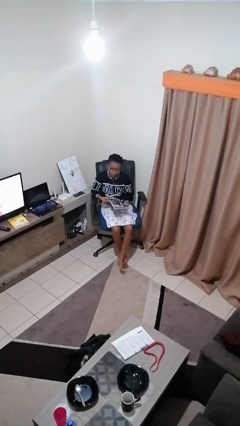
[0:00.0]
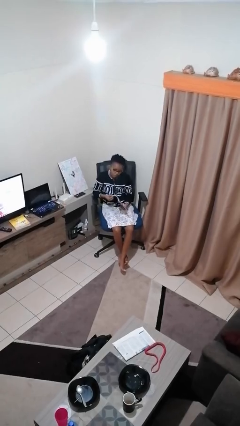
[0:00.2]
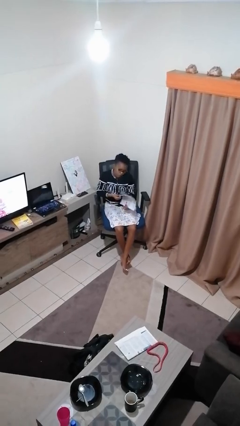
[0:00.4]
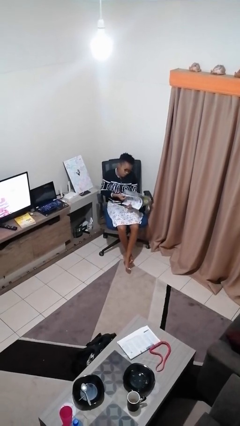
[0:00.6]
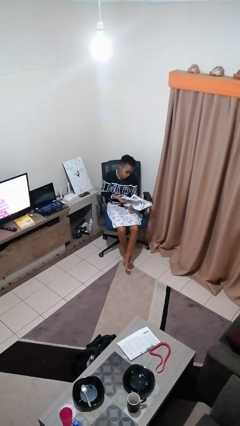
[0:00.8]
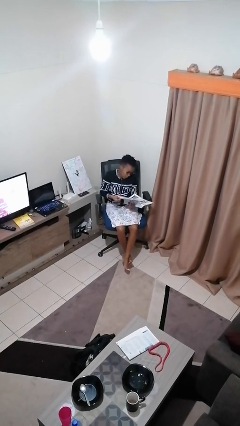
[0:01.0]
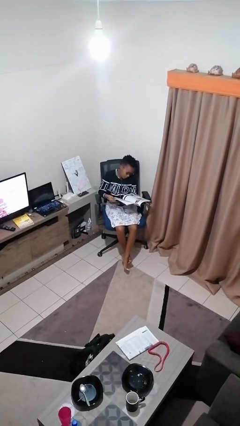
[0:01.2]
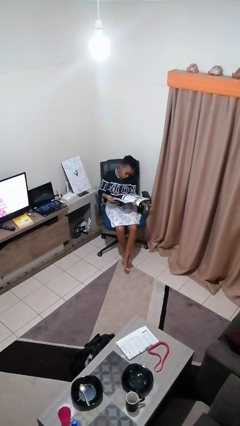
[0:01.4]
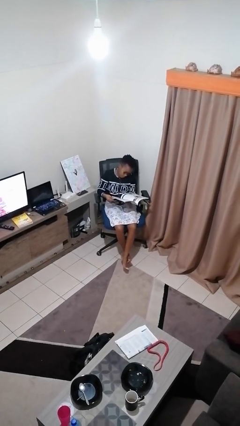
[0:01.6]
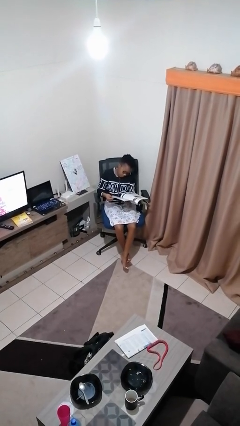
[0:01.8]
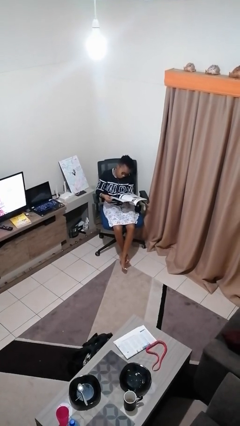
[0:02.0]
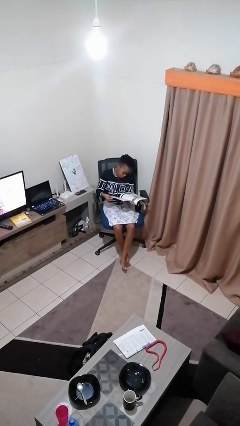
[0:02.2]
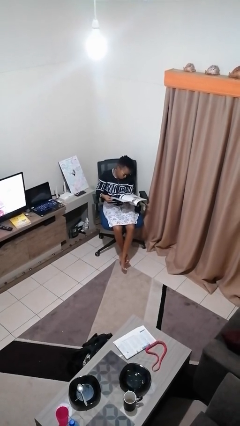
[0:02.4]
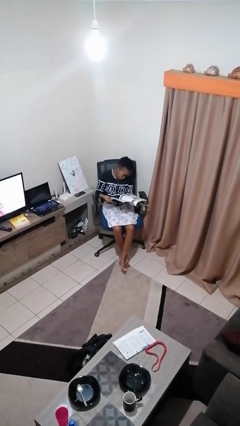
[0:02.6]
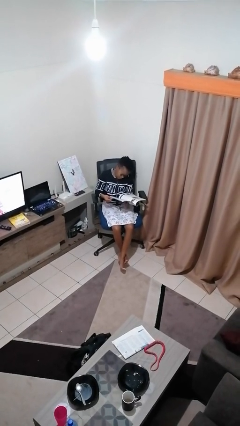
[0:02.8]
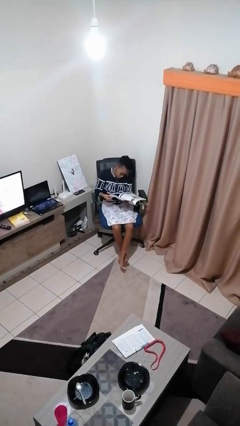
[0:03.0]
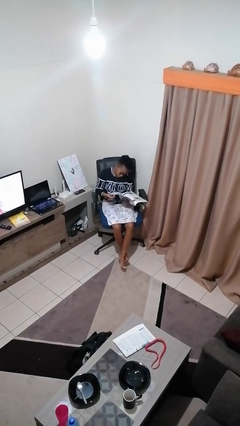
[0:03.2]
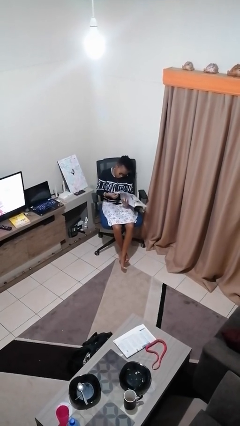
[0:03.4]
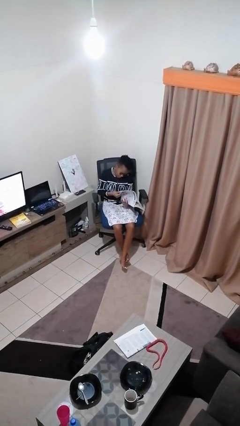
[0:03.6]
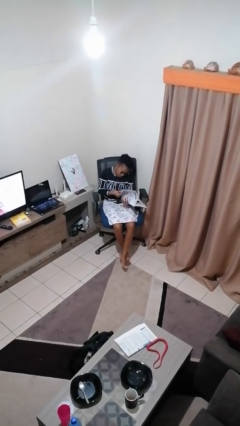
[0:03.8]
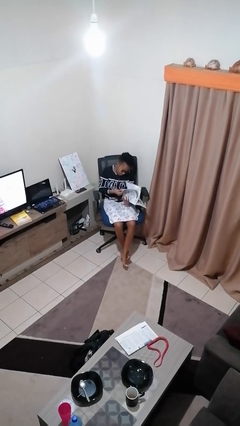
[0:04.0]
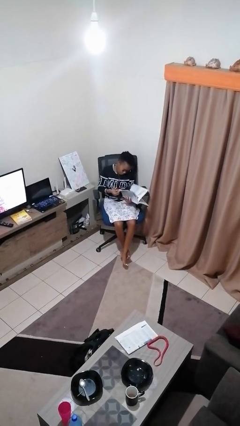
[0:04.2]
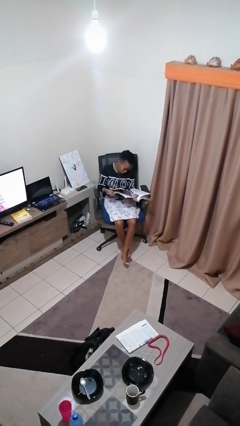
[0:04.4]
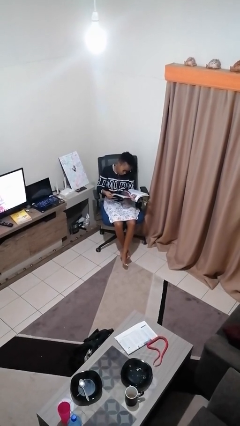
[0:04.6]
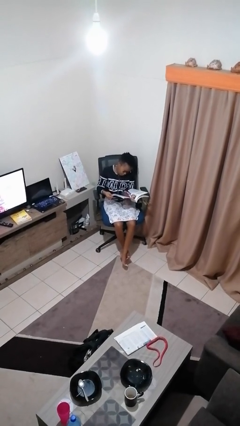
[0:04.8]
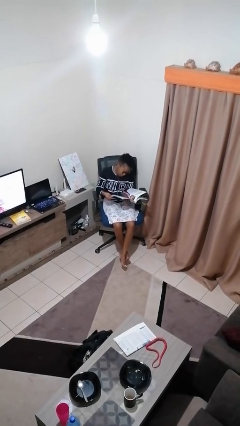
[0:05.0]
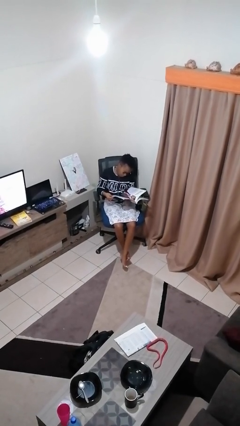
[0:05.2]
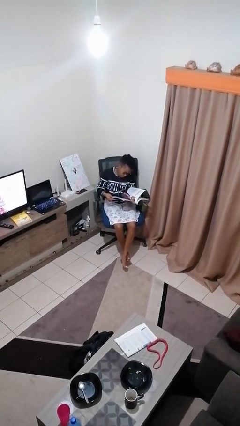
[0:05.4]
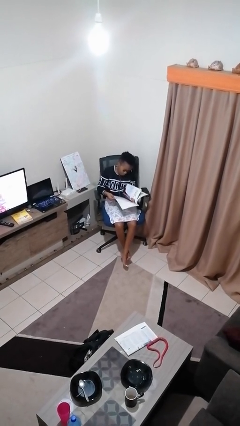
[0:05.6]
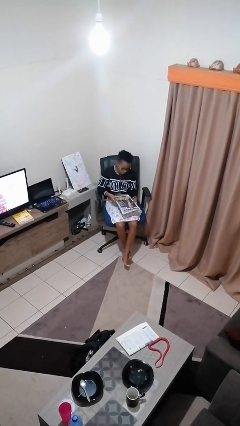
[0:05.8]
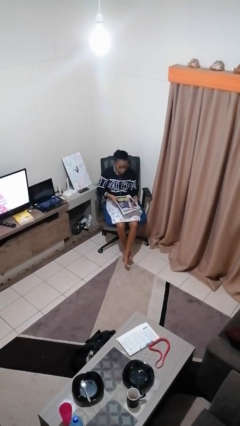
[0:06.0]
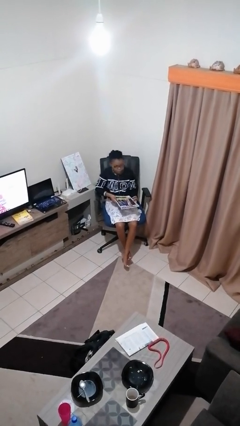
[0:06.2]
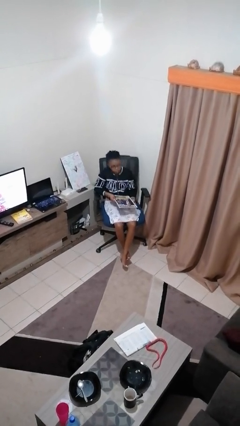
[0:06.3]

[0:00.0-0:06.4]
person reads magazine

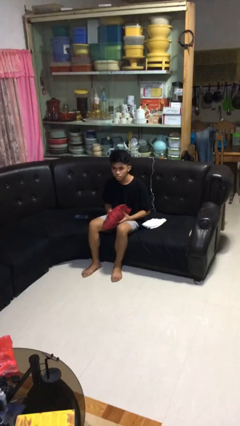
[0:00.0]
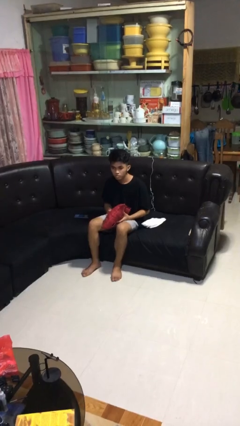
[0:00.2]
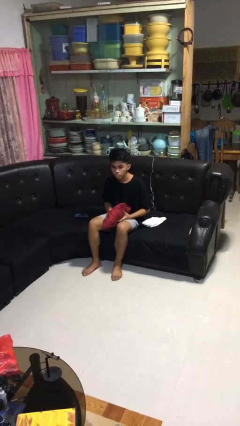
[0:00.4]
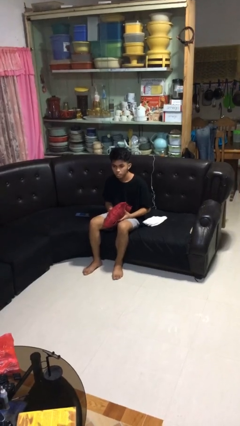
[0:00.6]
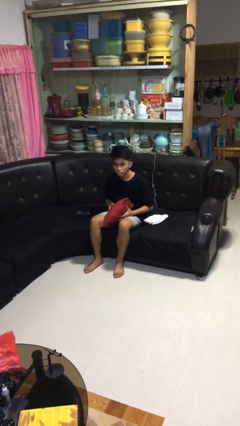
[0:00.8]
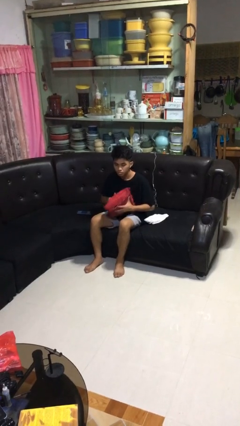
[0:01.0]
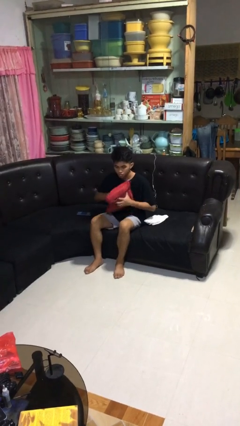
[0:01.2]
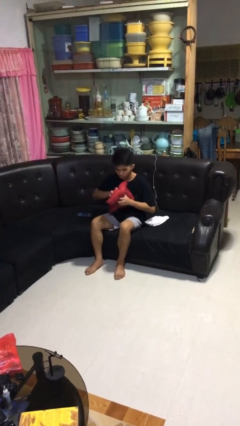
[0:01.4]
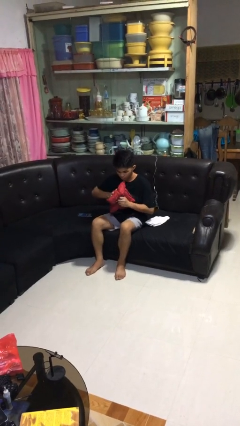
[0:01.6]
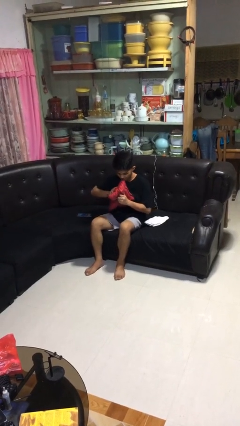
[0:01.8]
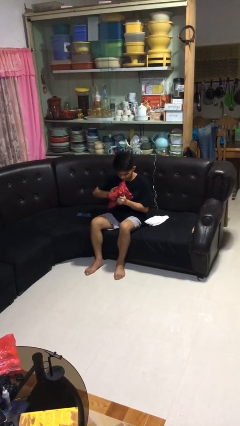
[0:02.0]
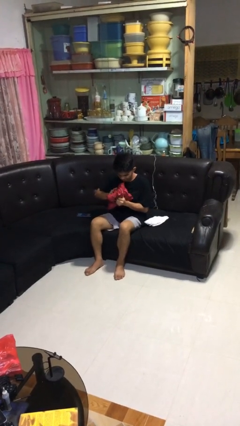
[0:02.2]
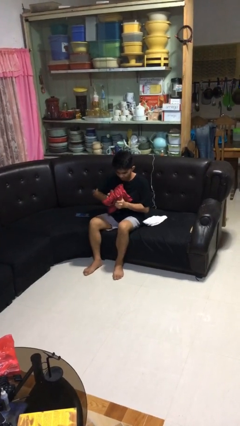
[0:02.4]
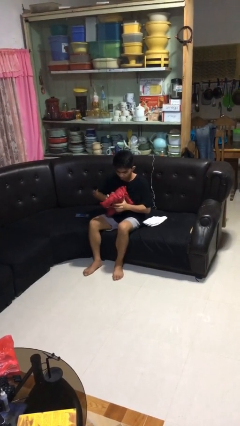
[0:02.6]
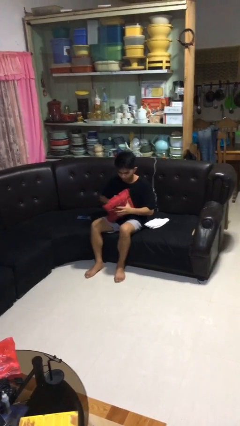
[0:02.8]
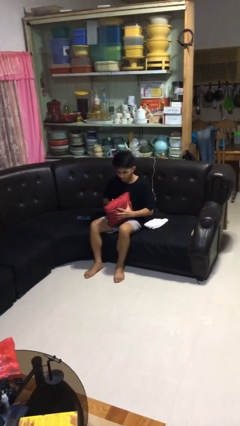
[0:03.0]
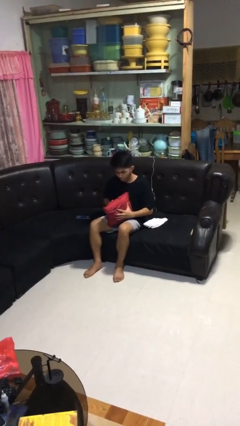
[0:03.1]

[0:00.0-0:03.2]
person squeezes object

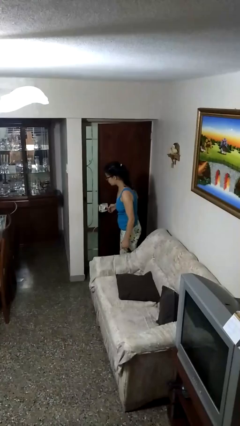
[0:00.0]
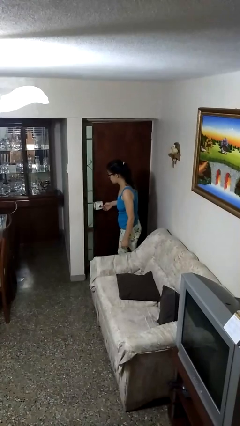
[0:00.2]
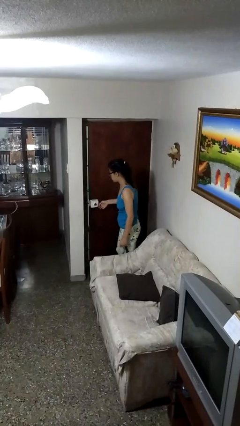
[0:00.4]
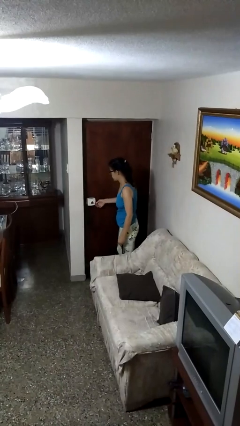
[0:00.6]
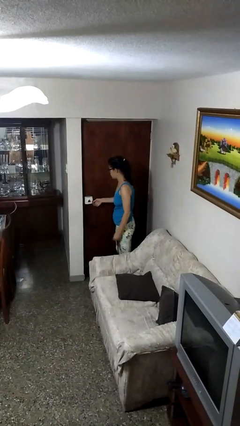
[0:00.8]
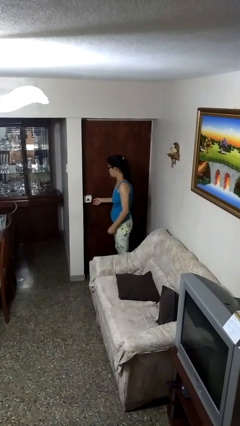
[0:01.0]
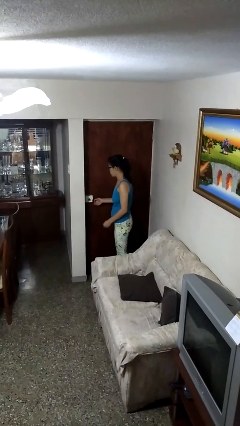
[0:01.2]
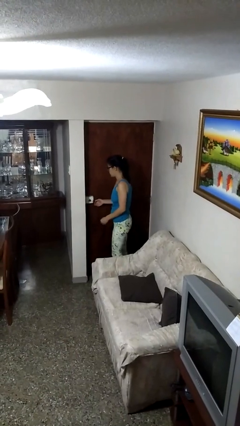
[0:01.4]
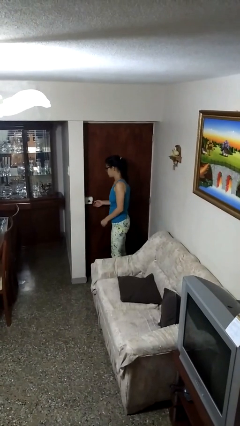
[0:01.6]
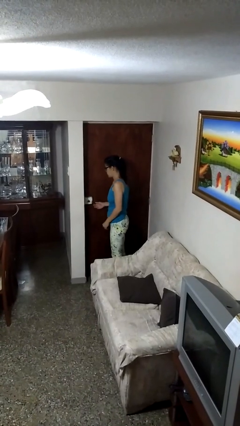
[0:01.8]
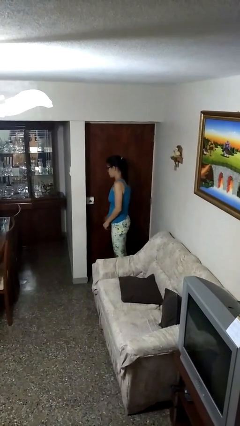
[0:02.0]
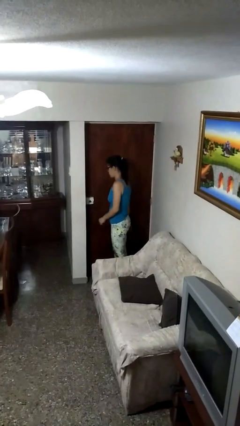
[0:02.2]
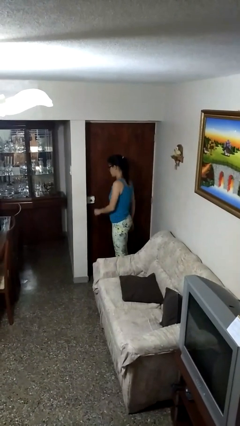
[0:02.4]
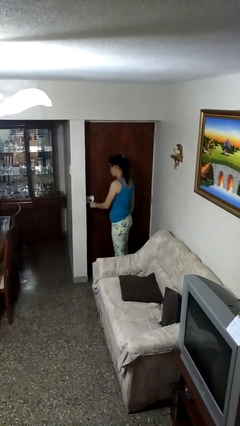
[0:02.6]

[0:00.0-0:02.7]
person closes facility door

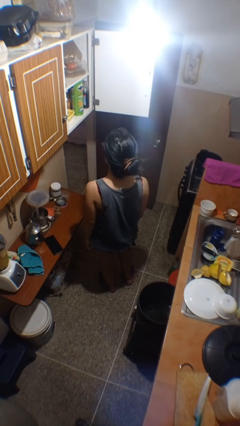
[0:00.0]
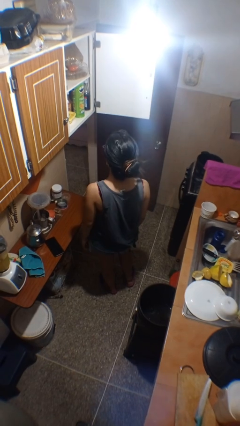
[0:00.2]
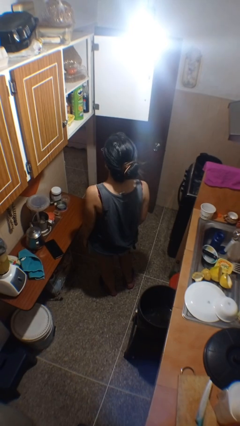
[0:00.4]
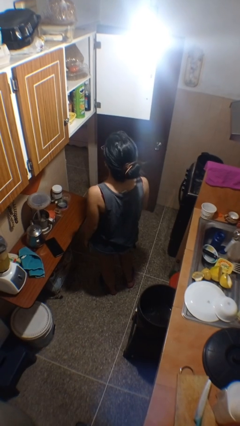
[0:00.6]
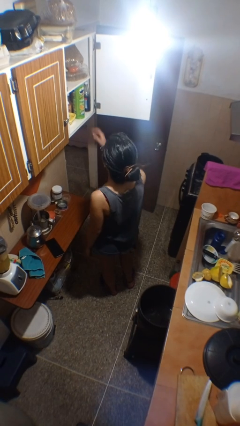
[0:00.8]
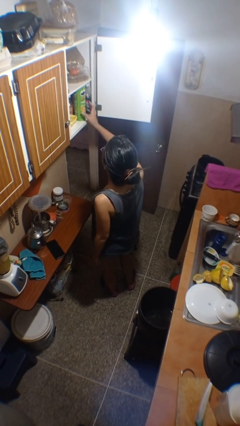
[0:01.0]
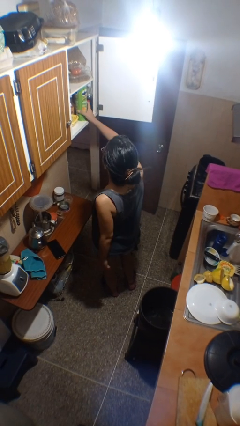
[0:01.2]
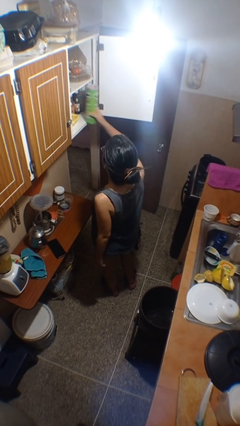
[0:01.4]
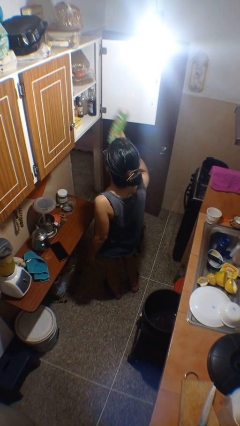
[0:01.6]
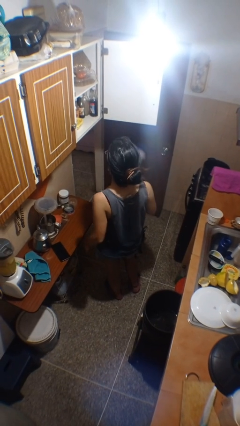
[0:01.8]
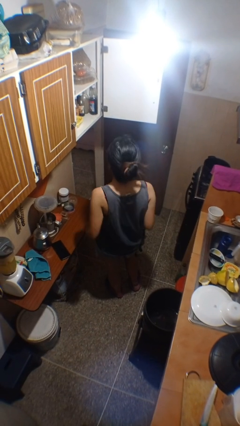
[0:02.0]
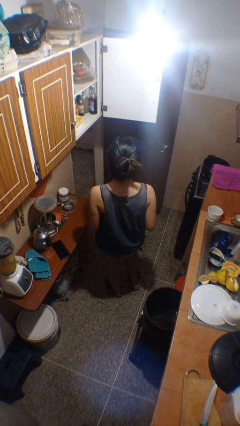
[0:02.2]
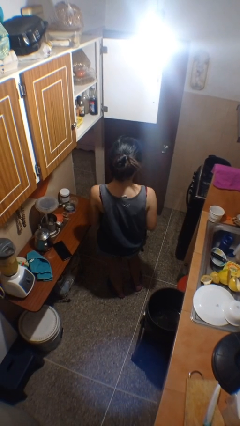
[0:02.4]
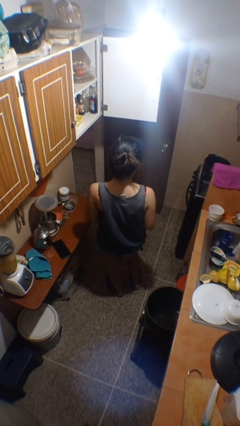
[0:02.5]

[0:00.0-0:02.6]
person takes object from cabinet

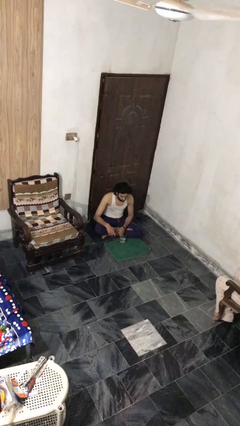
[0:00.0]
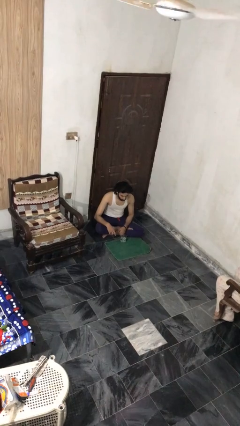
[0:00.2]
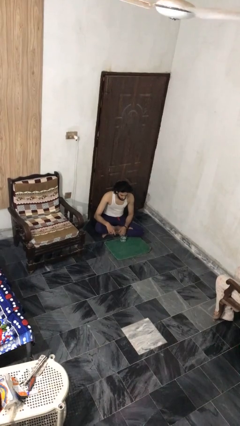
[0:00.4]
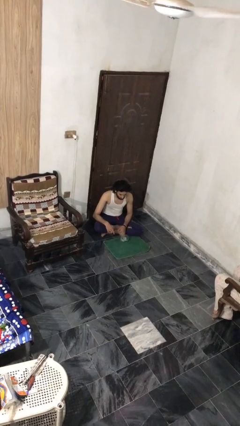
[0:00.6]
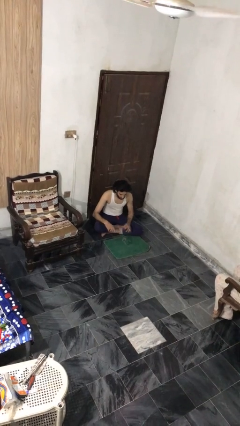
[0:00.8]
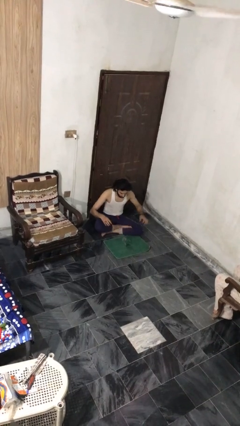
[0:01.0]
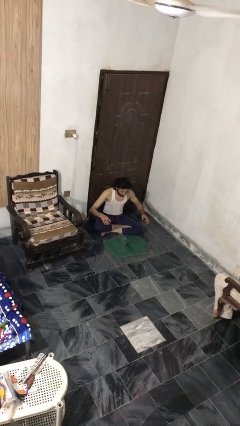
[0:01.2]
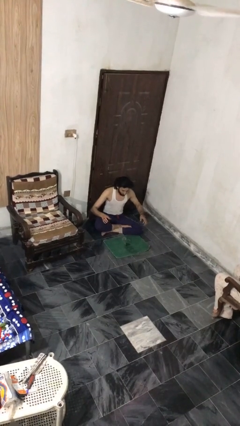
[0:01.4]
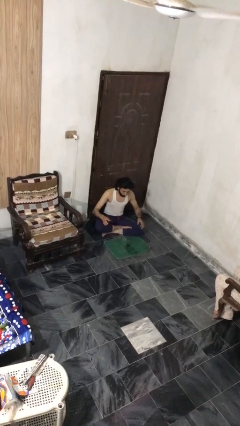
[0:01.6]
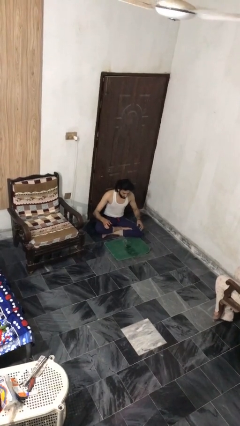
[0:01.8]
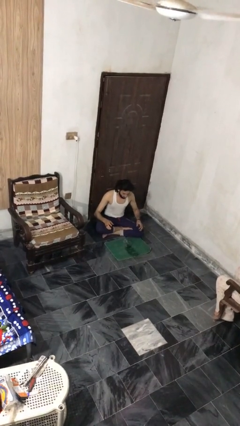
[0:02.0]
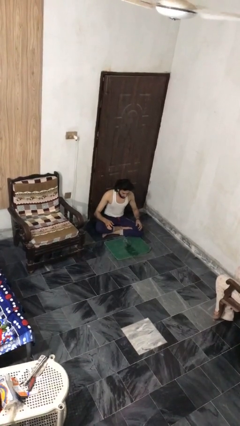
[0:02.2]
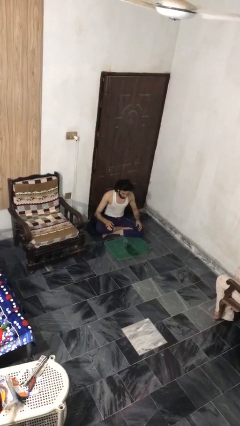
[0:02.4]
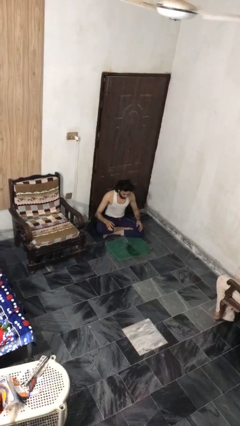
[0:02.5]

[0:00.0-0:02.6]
person spills on floor
